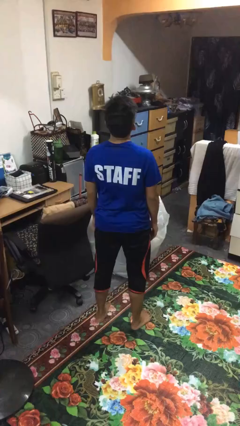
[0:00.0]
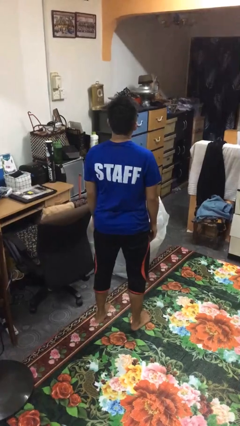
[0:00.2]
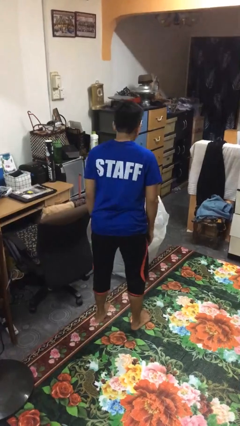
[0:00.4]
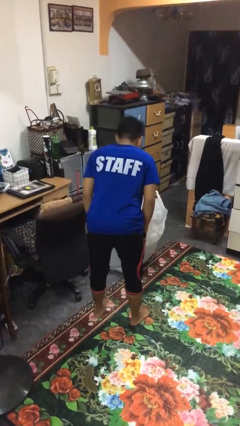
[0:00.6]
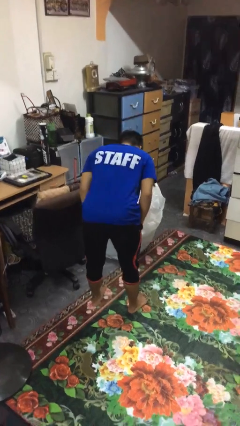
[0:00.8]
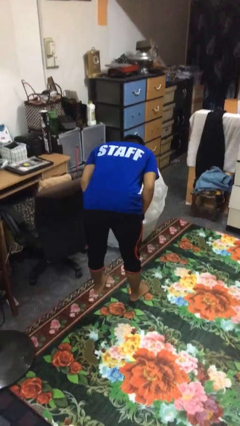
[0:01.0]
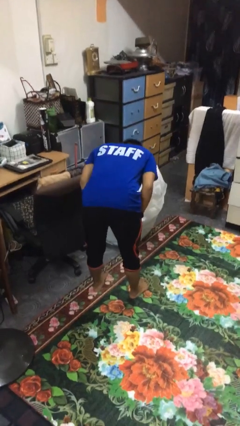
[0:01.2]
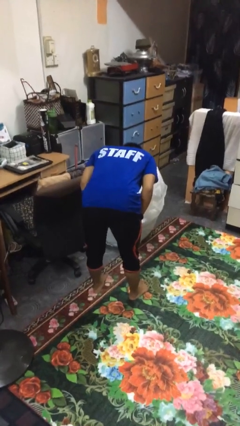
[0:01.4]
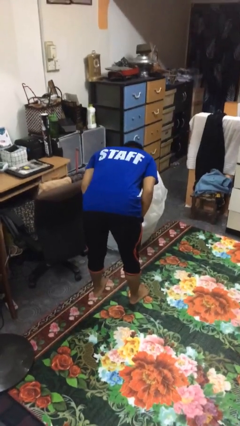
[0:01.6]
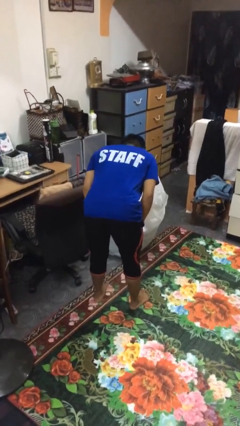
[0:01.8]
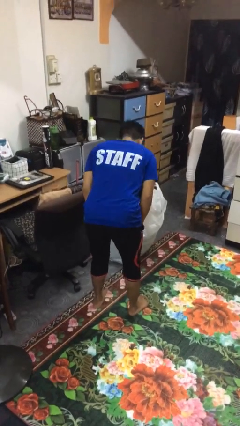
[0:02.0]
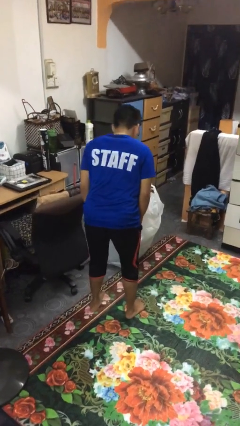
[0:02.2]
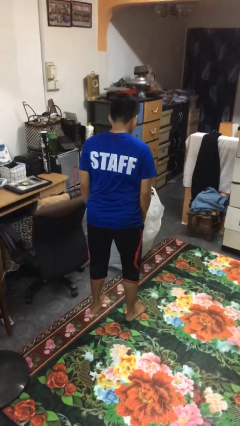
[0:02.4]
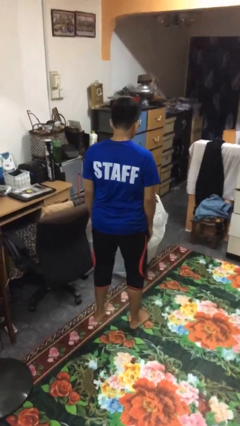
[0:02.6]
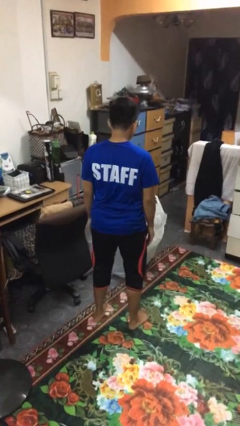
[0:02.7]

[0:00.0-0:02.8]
person bows

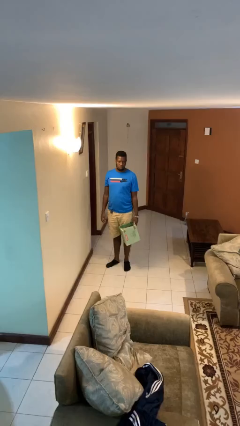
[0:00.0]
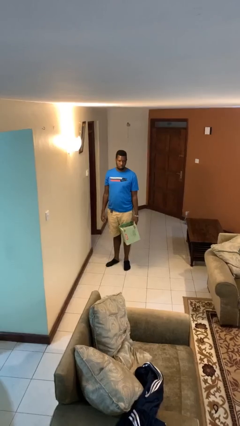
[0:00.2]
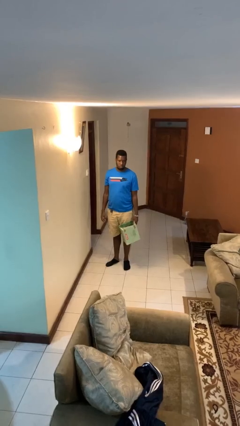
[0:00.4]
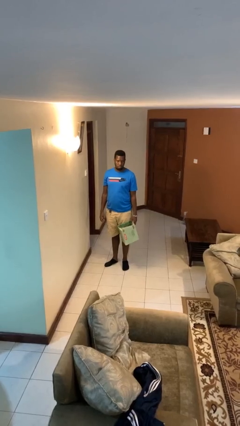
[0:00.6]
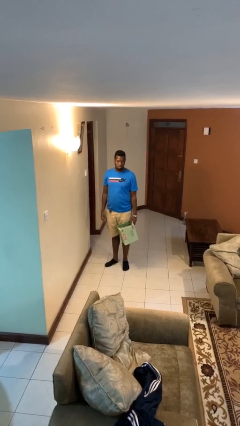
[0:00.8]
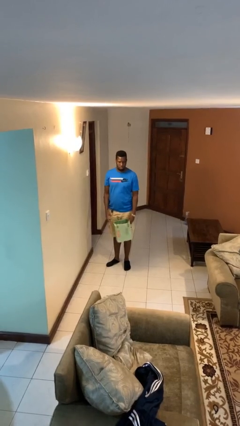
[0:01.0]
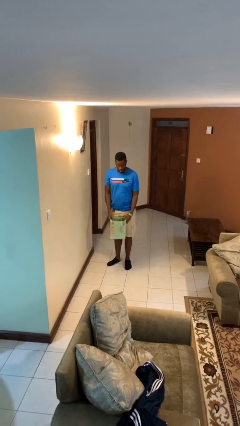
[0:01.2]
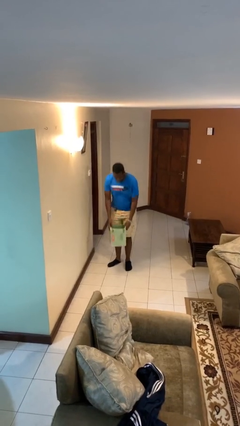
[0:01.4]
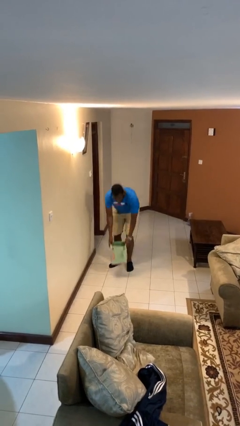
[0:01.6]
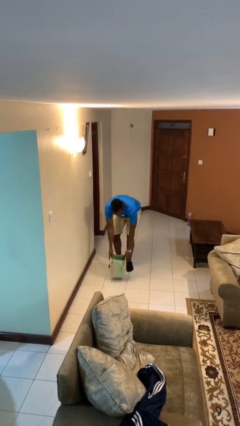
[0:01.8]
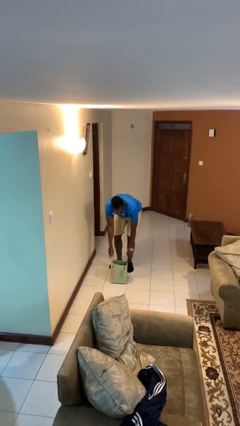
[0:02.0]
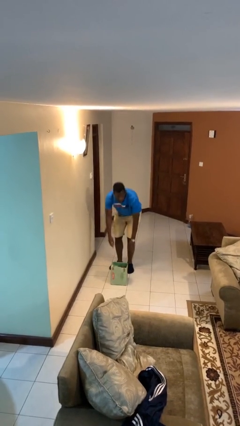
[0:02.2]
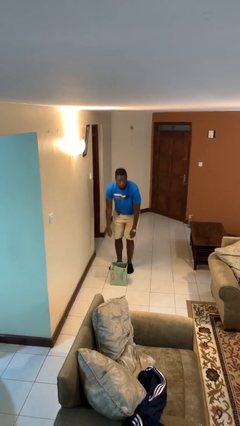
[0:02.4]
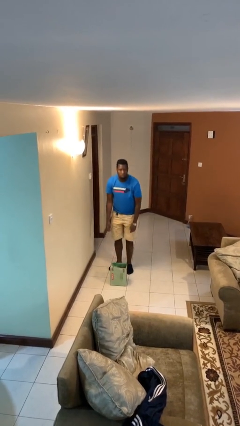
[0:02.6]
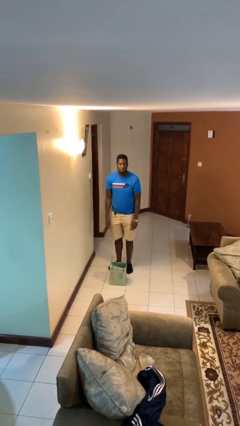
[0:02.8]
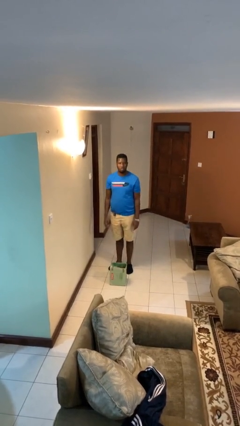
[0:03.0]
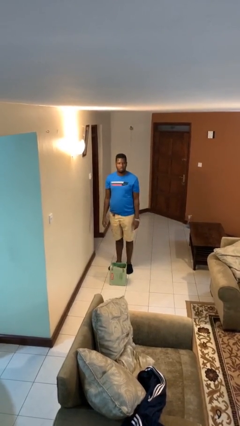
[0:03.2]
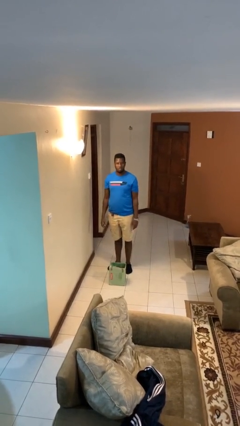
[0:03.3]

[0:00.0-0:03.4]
person puts down object on floor

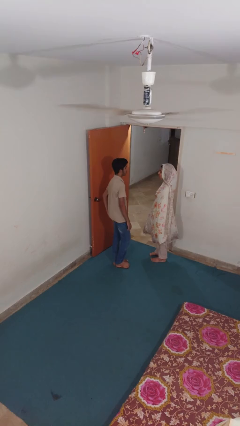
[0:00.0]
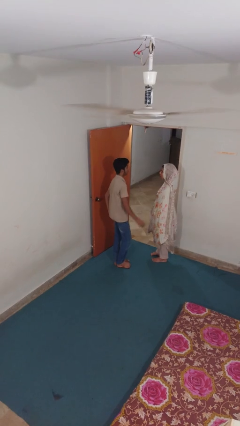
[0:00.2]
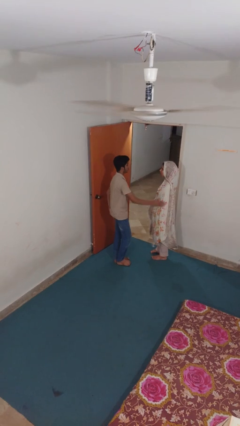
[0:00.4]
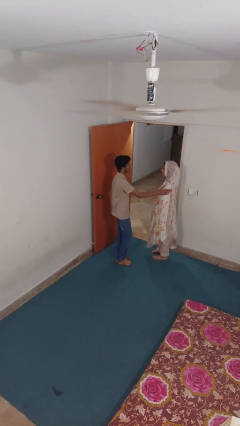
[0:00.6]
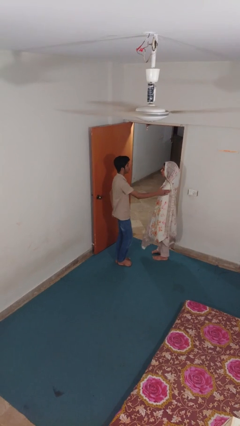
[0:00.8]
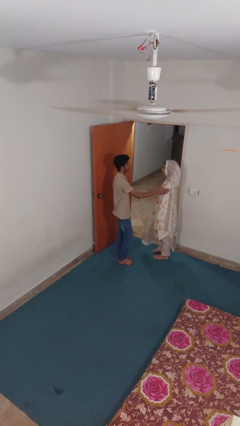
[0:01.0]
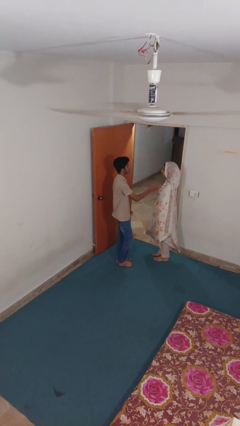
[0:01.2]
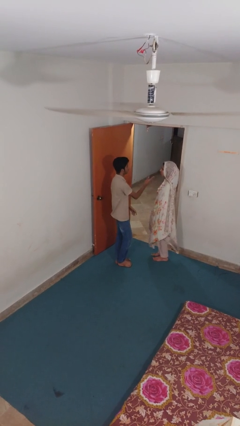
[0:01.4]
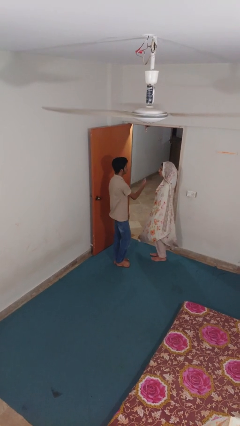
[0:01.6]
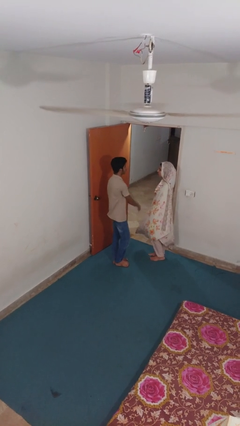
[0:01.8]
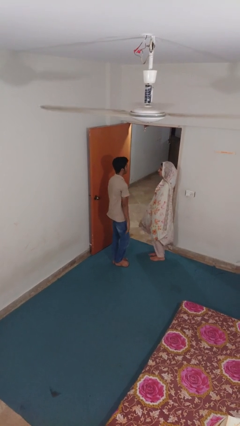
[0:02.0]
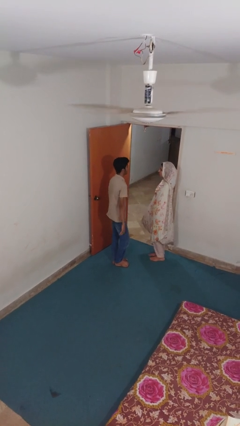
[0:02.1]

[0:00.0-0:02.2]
person shoves person

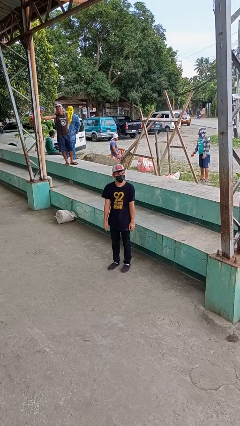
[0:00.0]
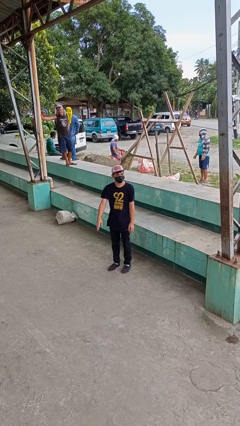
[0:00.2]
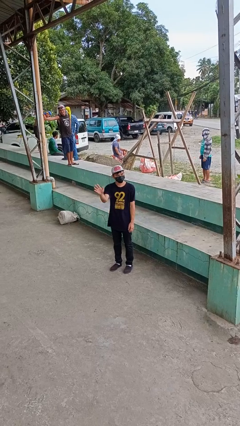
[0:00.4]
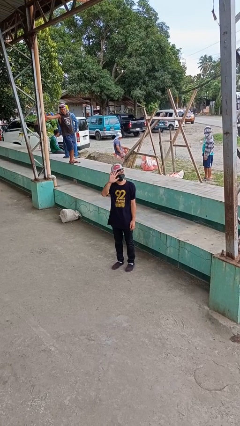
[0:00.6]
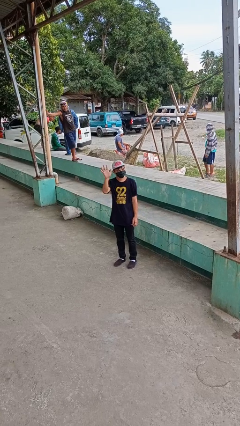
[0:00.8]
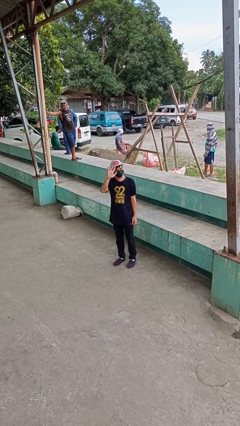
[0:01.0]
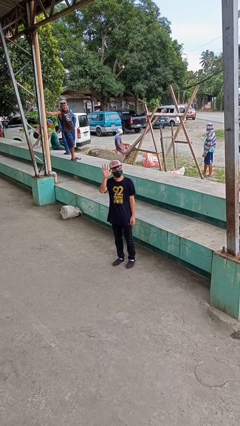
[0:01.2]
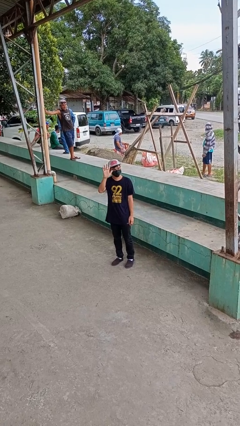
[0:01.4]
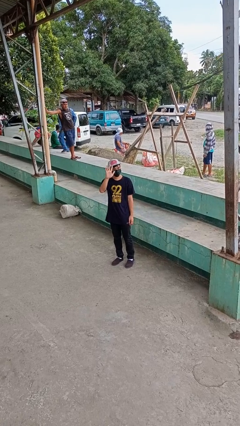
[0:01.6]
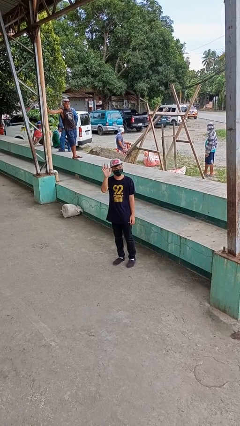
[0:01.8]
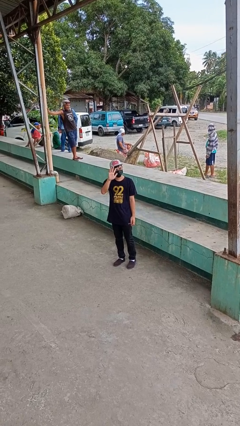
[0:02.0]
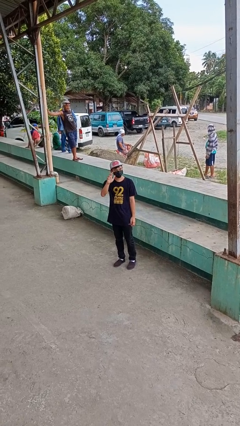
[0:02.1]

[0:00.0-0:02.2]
person waves at person

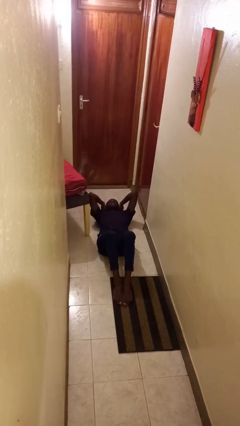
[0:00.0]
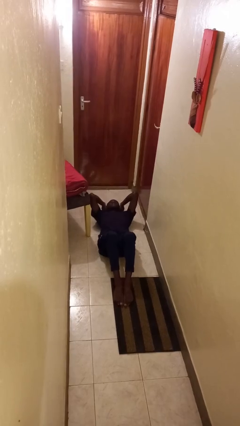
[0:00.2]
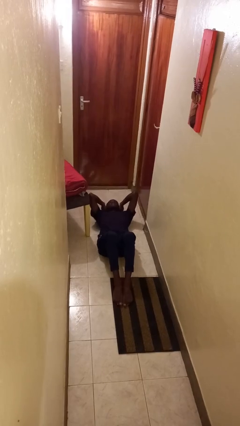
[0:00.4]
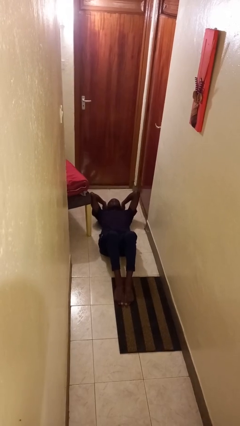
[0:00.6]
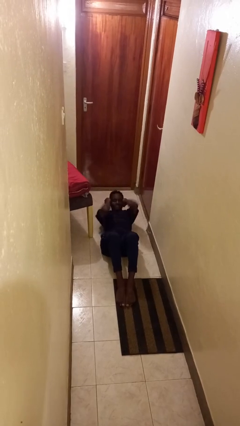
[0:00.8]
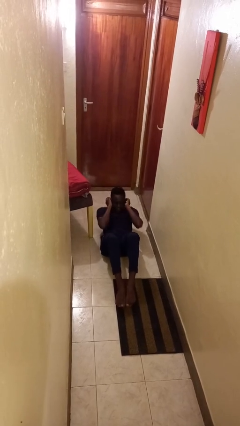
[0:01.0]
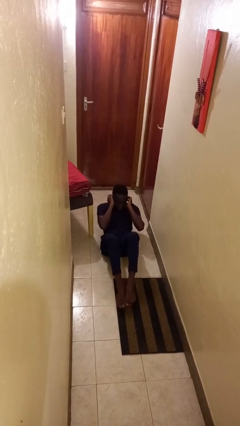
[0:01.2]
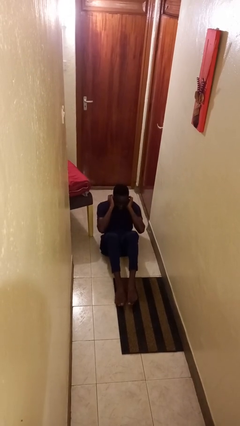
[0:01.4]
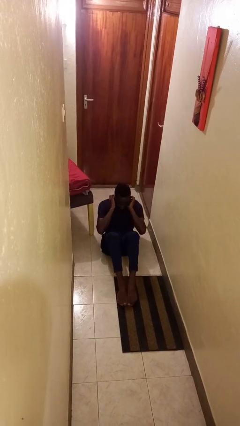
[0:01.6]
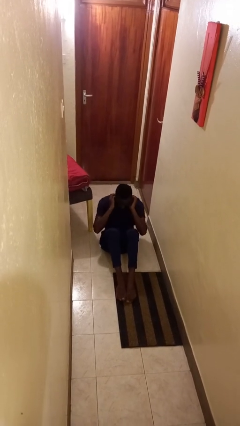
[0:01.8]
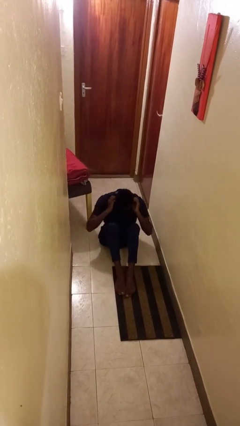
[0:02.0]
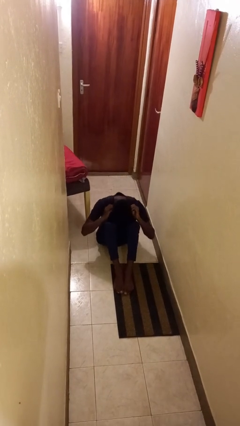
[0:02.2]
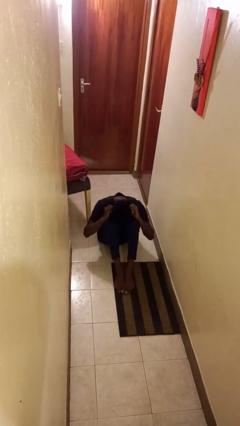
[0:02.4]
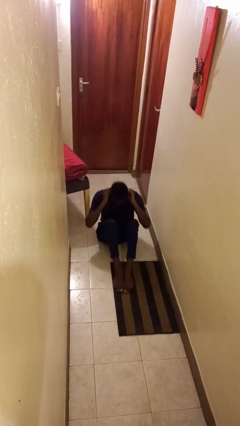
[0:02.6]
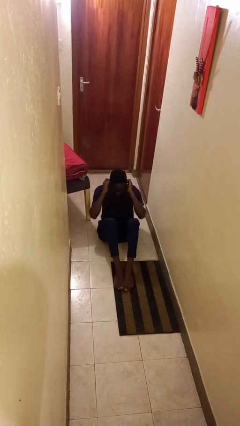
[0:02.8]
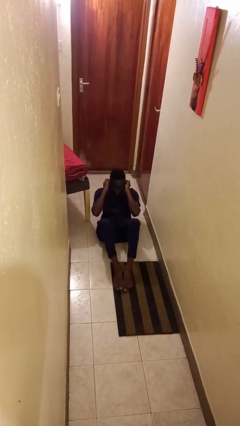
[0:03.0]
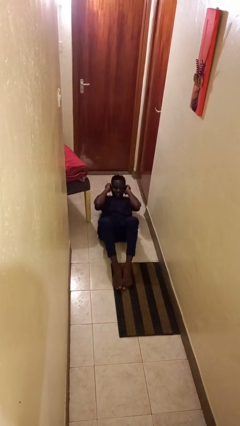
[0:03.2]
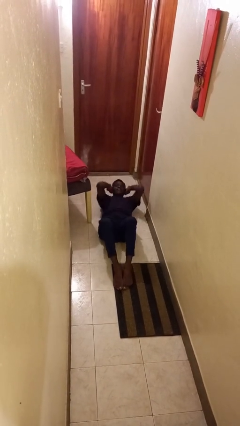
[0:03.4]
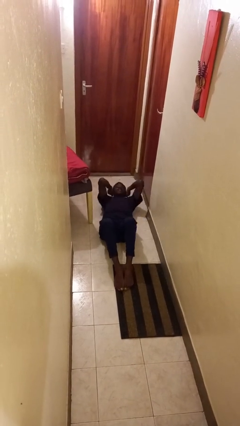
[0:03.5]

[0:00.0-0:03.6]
person exercises with situp

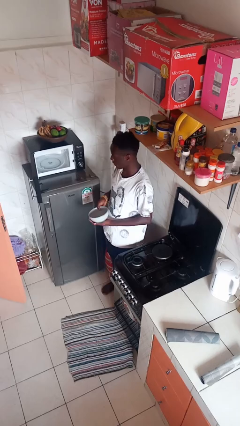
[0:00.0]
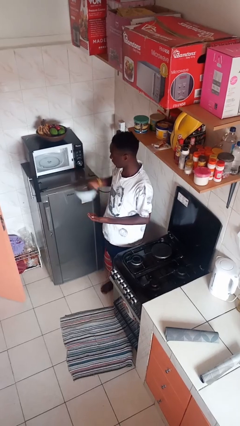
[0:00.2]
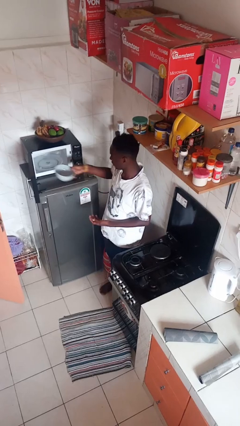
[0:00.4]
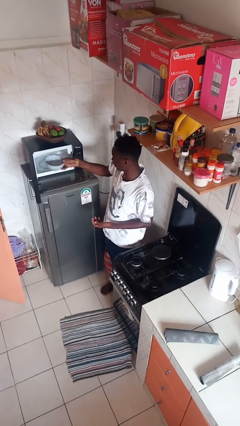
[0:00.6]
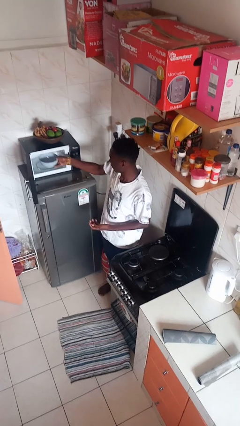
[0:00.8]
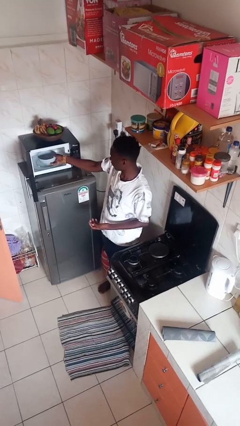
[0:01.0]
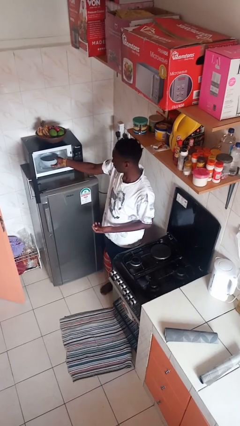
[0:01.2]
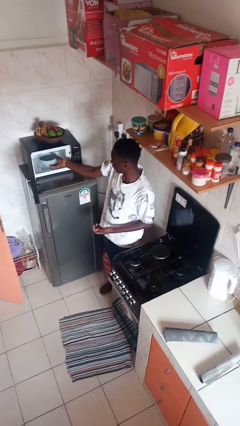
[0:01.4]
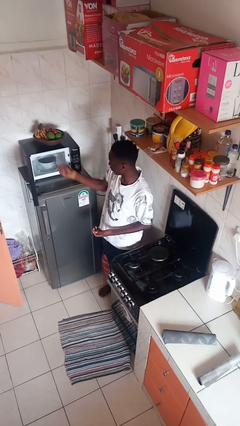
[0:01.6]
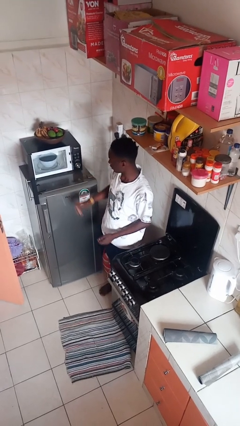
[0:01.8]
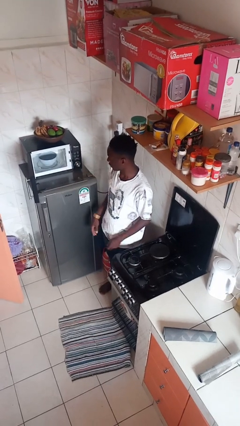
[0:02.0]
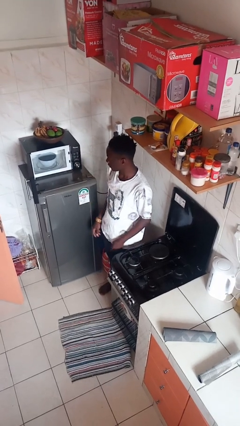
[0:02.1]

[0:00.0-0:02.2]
person puts object into microwave

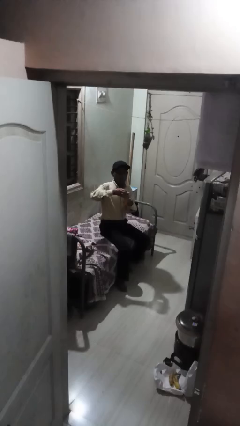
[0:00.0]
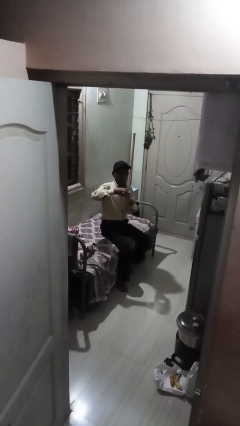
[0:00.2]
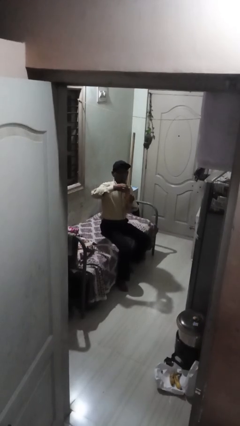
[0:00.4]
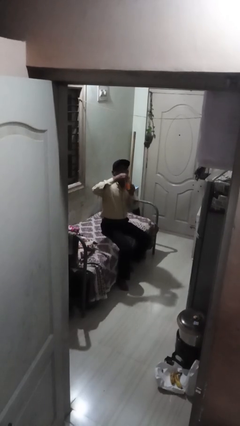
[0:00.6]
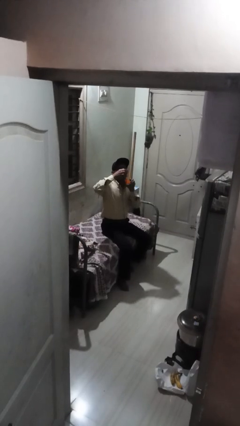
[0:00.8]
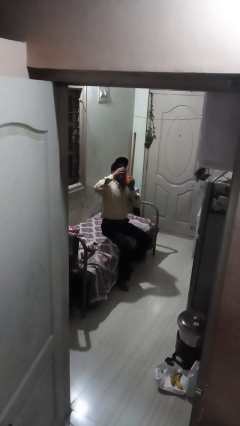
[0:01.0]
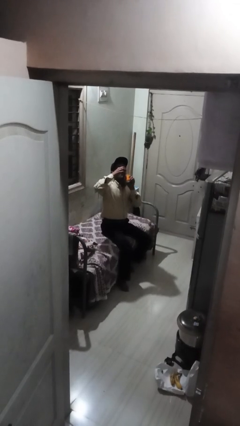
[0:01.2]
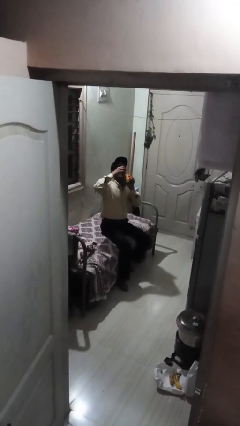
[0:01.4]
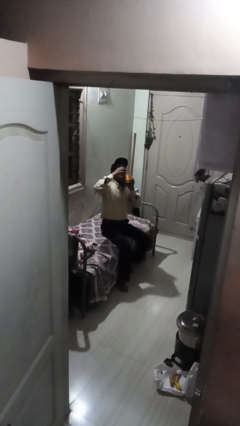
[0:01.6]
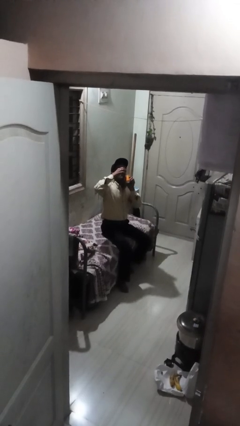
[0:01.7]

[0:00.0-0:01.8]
person drinks from beverage can
